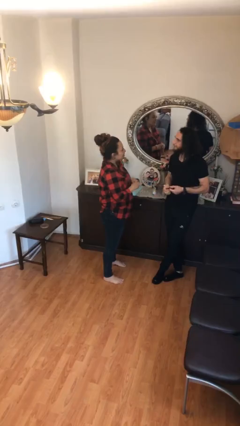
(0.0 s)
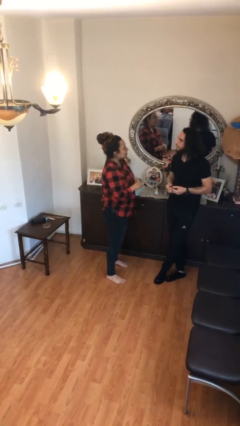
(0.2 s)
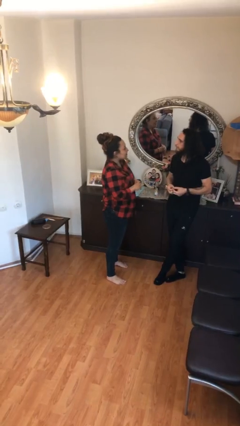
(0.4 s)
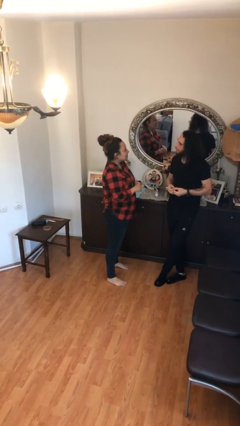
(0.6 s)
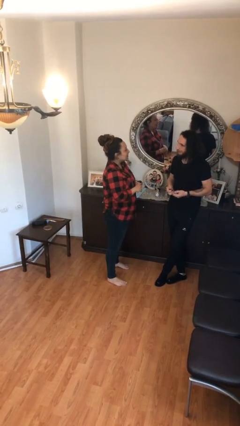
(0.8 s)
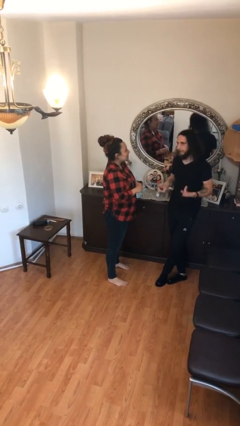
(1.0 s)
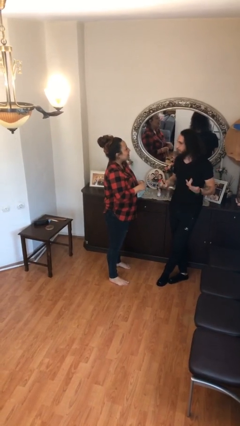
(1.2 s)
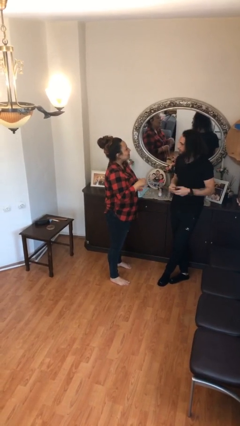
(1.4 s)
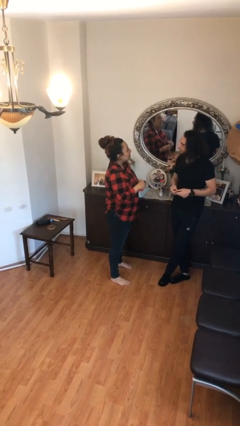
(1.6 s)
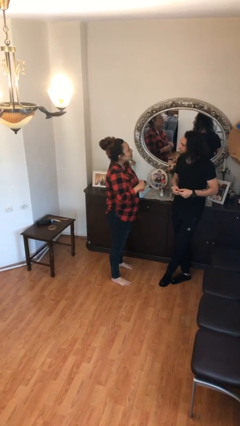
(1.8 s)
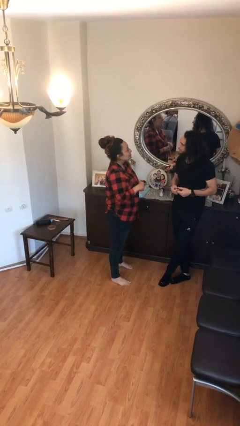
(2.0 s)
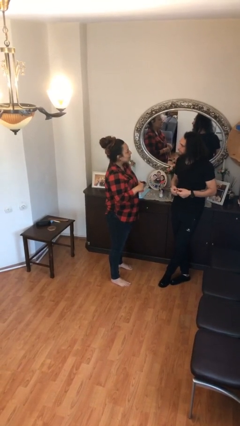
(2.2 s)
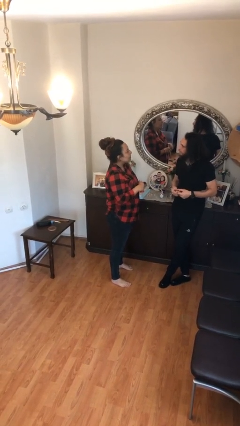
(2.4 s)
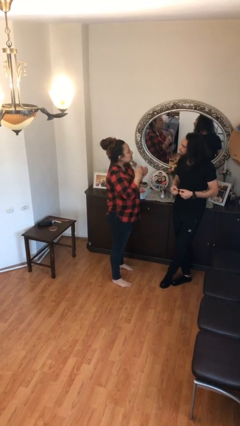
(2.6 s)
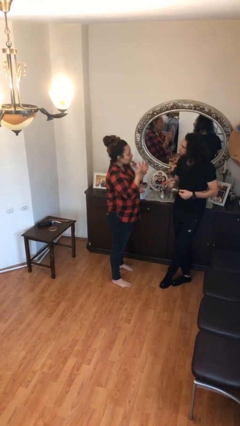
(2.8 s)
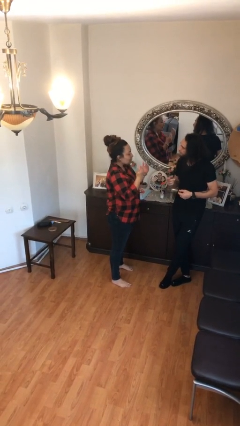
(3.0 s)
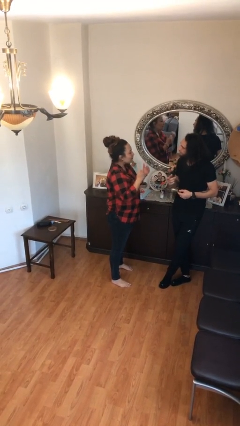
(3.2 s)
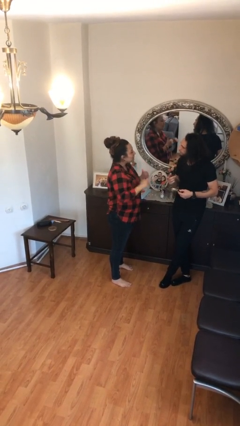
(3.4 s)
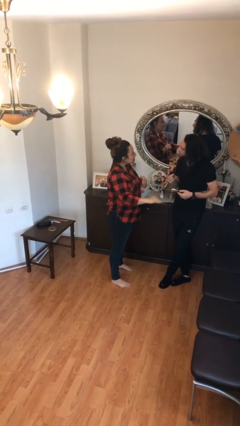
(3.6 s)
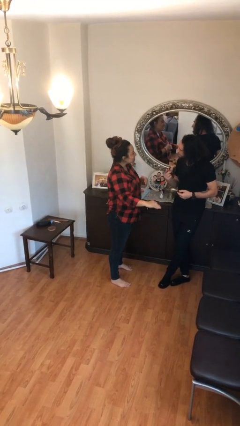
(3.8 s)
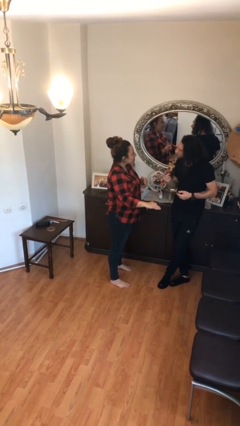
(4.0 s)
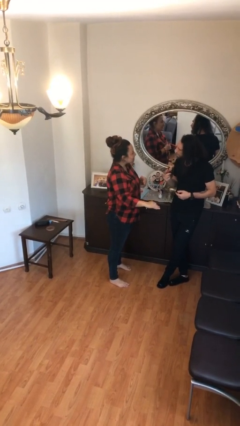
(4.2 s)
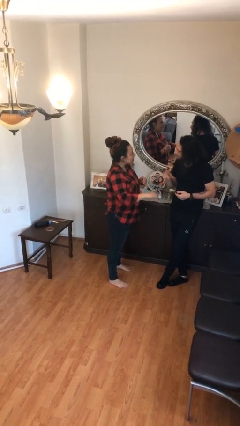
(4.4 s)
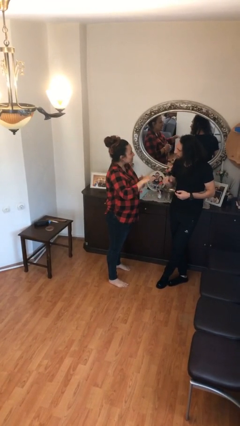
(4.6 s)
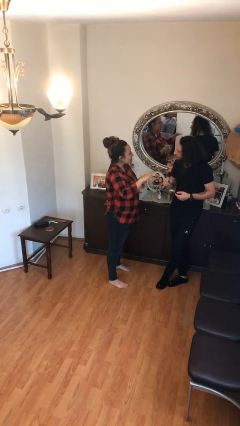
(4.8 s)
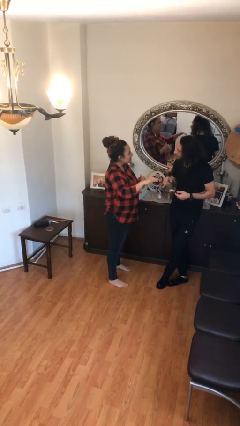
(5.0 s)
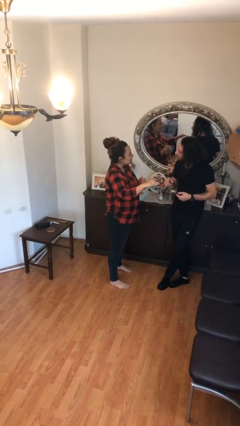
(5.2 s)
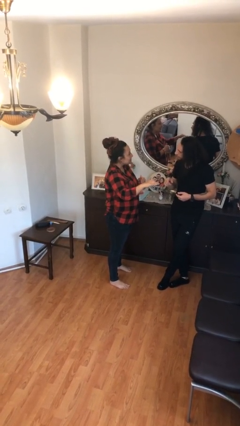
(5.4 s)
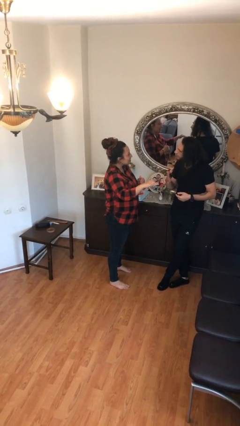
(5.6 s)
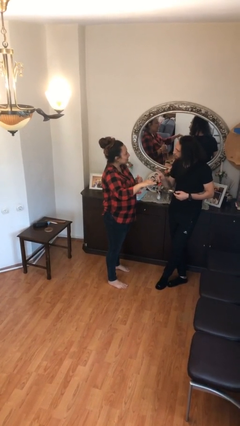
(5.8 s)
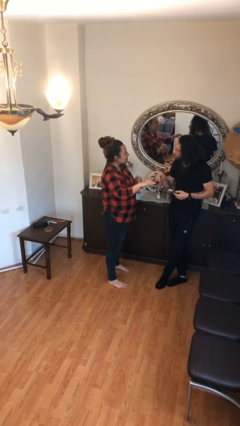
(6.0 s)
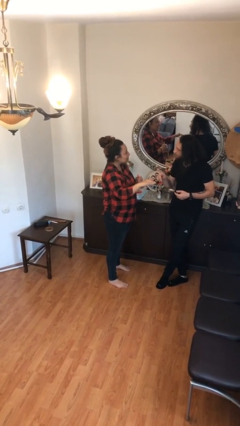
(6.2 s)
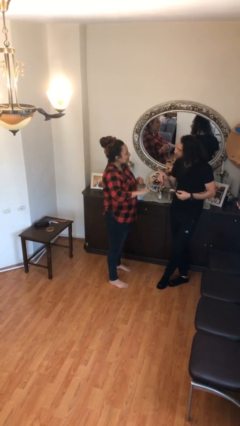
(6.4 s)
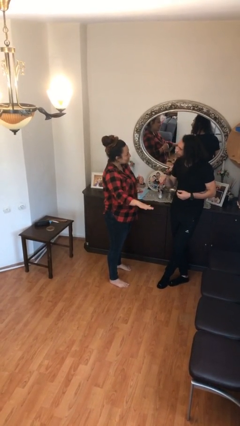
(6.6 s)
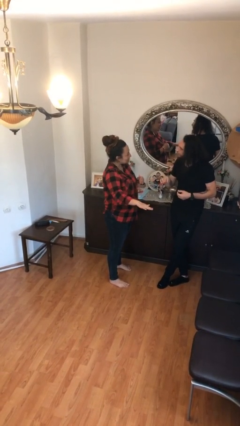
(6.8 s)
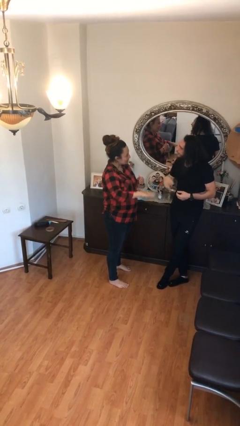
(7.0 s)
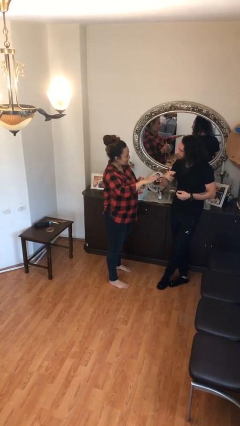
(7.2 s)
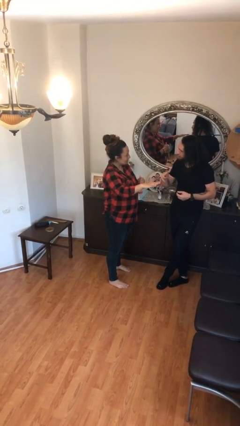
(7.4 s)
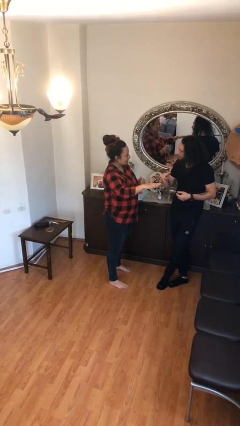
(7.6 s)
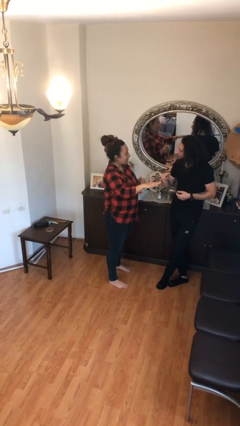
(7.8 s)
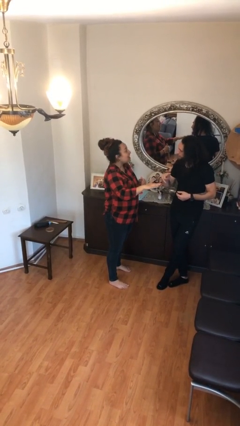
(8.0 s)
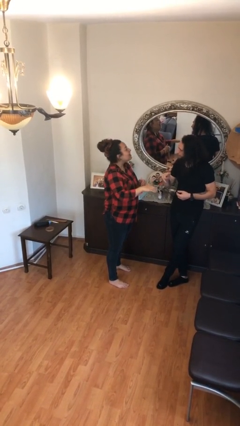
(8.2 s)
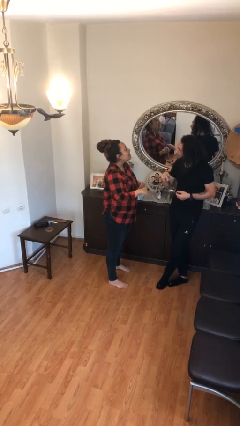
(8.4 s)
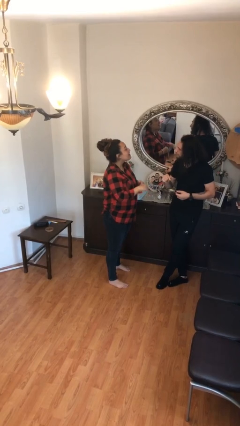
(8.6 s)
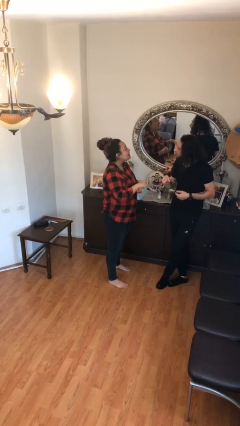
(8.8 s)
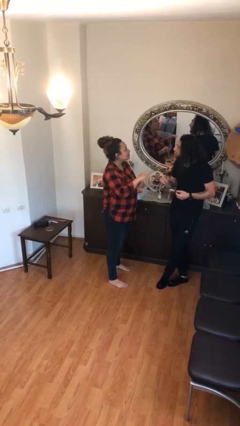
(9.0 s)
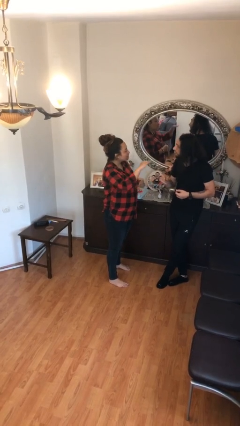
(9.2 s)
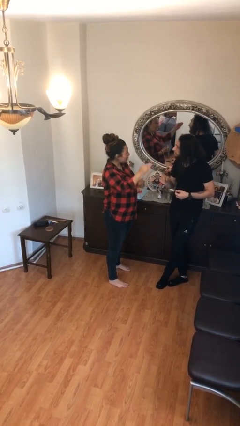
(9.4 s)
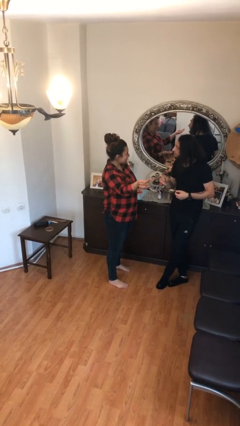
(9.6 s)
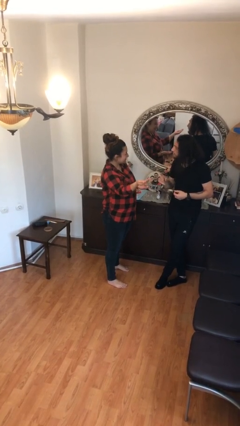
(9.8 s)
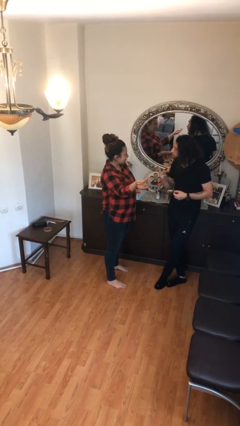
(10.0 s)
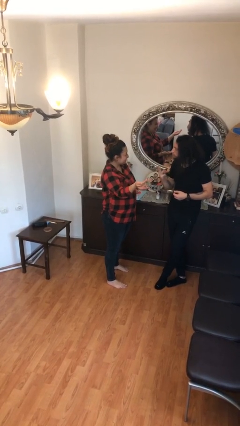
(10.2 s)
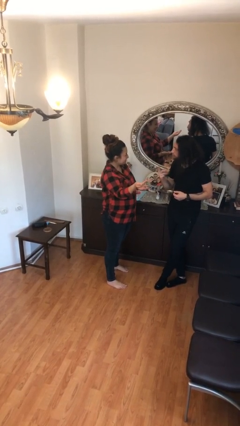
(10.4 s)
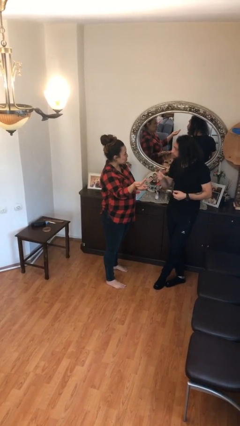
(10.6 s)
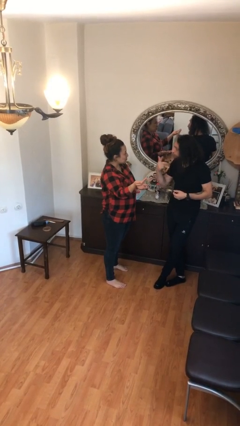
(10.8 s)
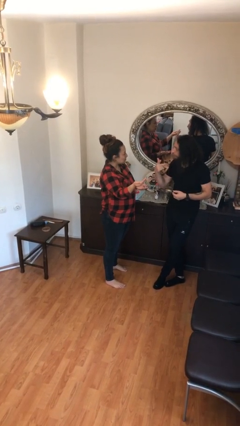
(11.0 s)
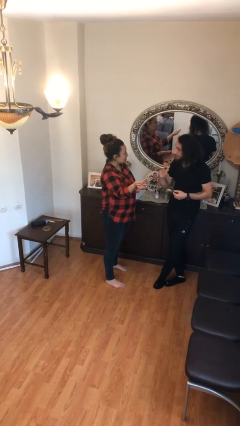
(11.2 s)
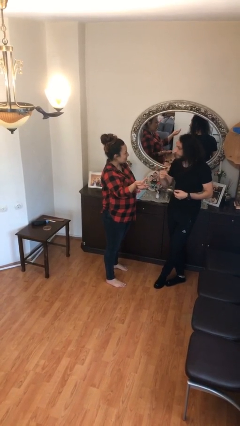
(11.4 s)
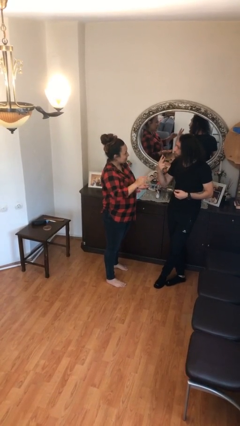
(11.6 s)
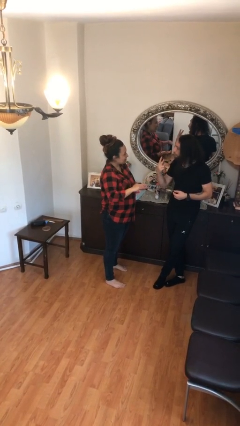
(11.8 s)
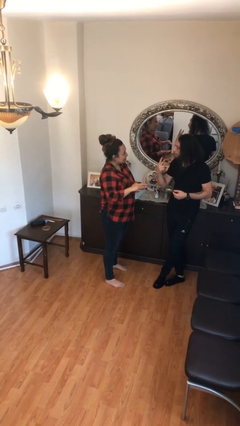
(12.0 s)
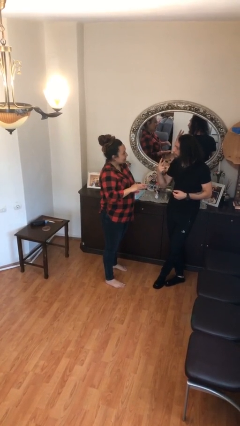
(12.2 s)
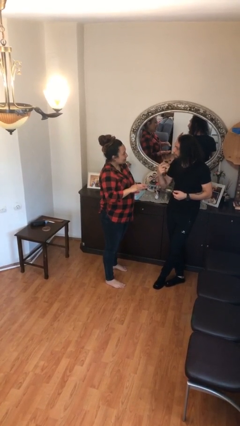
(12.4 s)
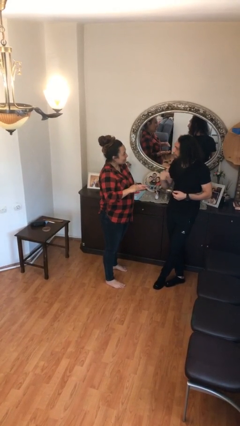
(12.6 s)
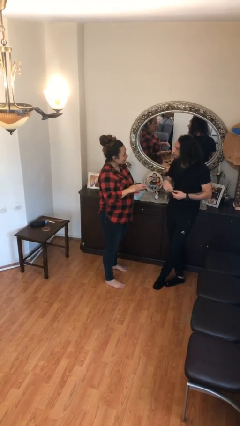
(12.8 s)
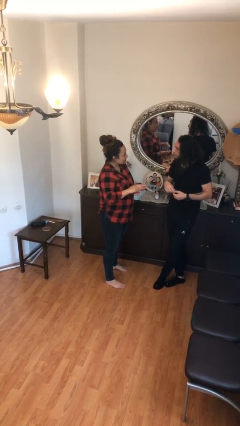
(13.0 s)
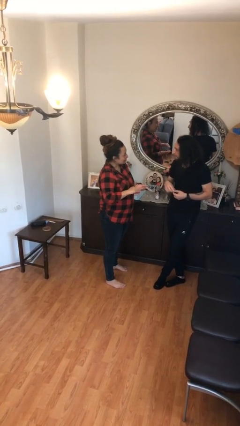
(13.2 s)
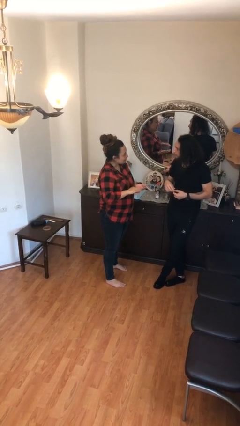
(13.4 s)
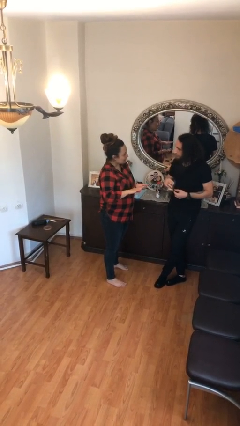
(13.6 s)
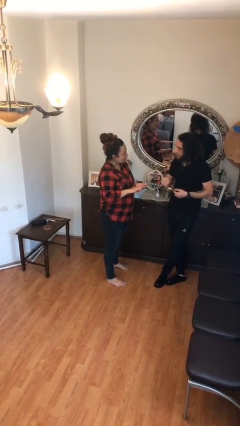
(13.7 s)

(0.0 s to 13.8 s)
person talks to person

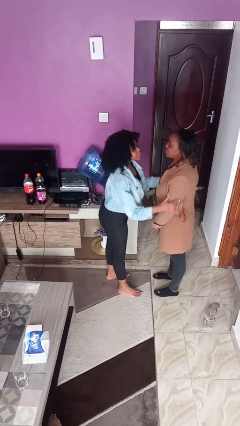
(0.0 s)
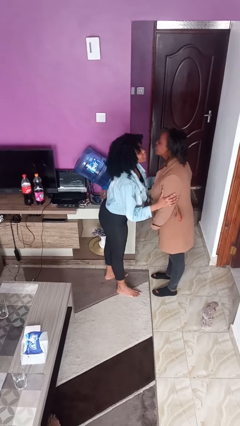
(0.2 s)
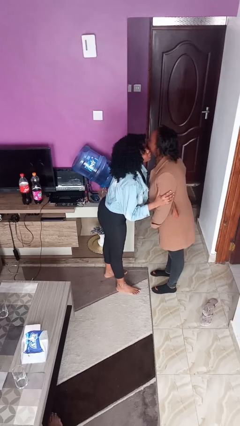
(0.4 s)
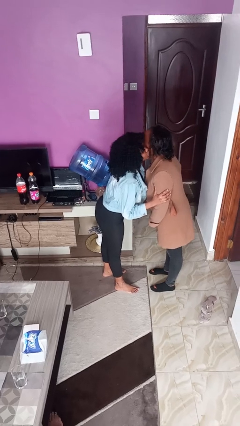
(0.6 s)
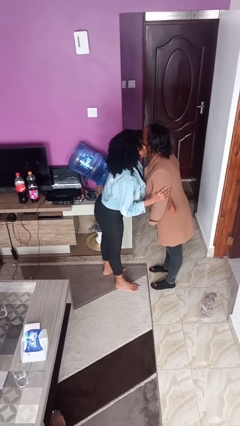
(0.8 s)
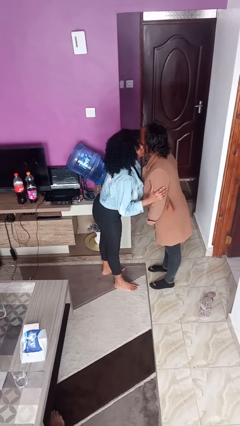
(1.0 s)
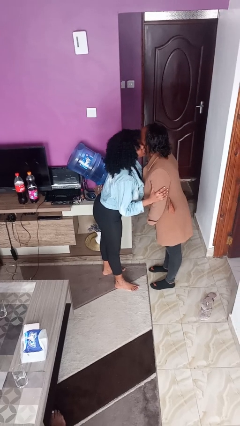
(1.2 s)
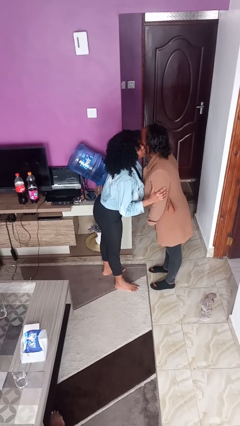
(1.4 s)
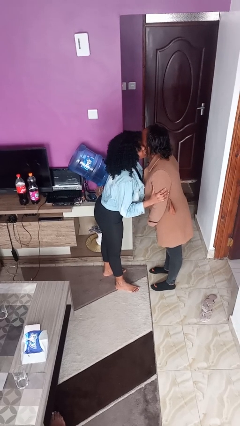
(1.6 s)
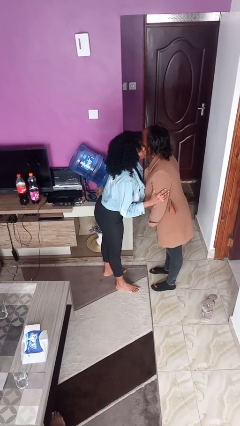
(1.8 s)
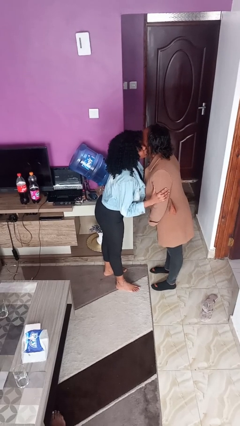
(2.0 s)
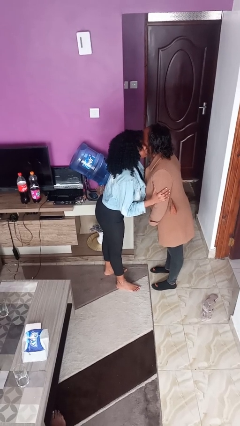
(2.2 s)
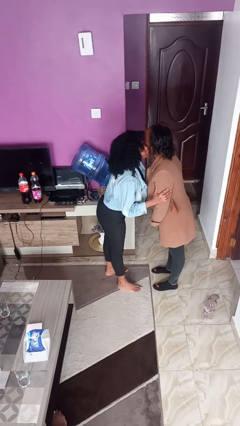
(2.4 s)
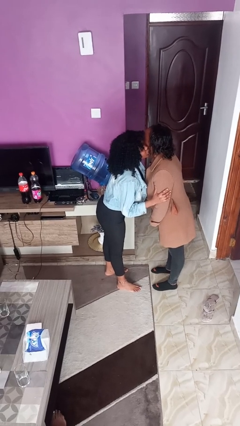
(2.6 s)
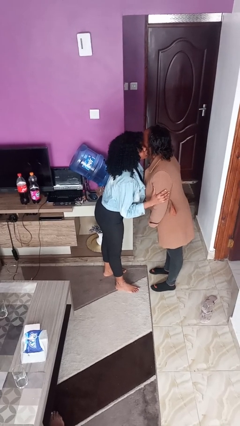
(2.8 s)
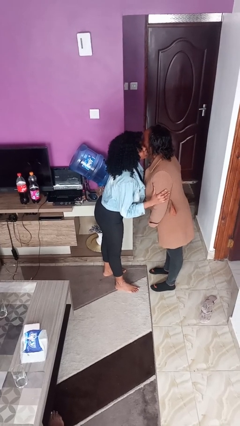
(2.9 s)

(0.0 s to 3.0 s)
person kisses cheek of person

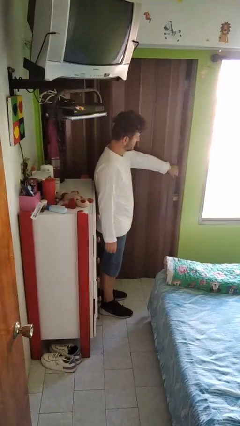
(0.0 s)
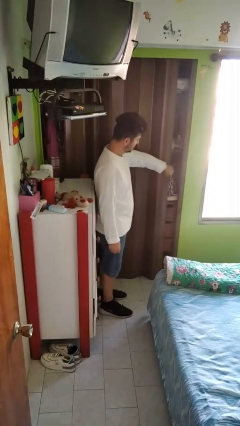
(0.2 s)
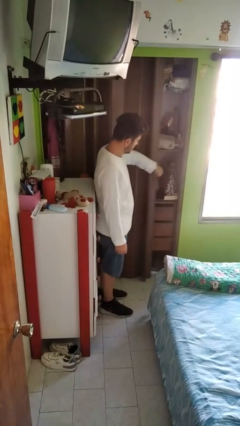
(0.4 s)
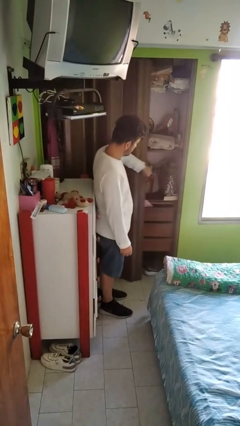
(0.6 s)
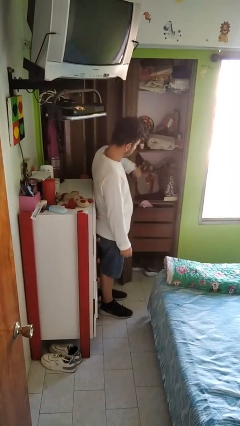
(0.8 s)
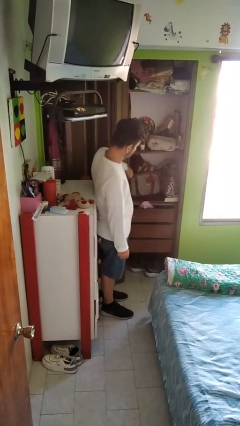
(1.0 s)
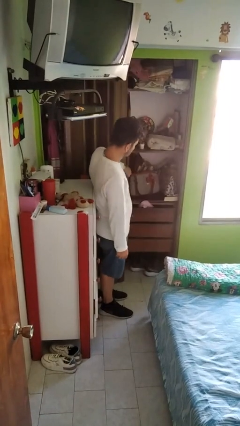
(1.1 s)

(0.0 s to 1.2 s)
person opens sliding door
